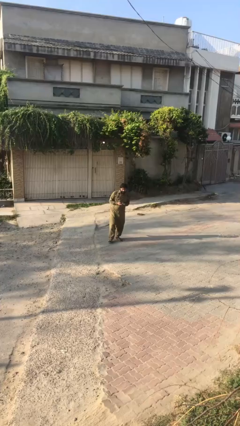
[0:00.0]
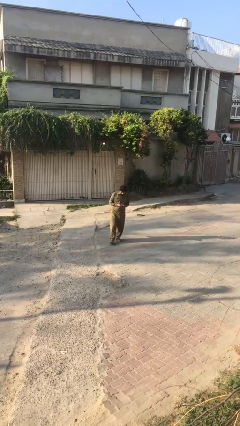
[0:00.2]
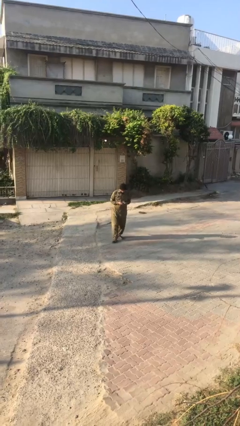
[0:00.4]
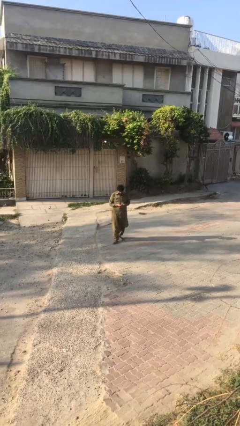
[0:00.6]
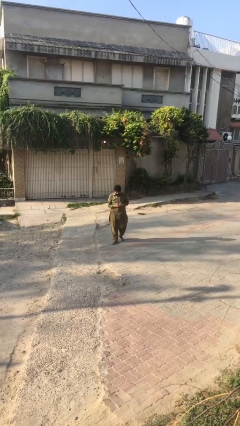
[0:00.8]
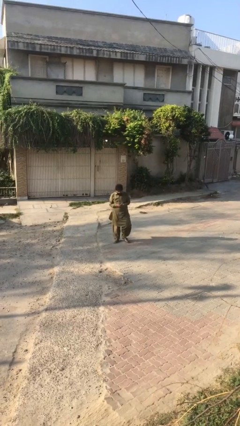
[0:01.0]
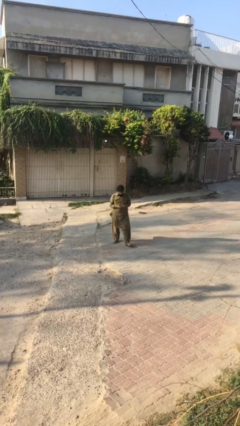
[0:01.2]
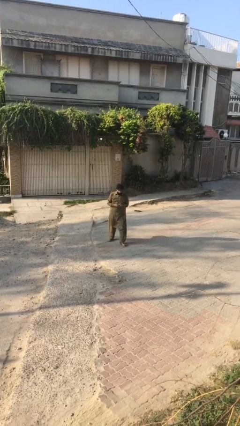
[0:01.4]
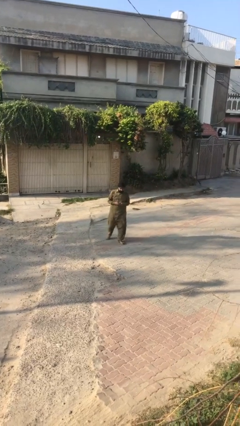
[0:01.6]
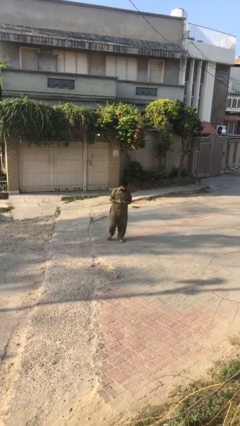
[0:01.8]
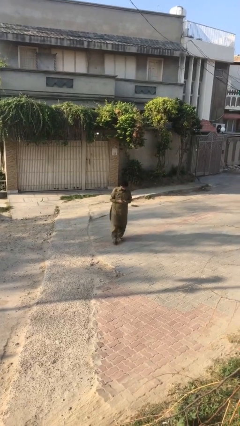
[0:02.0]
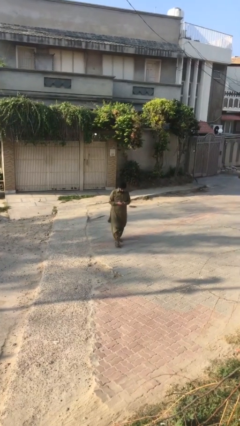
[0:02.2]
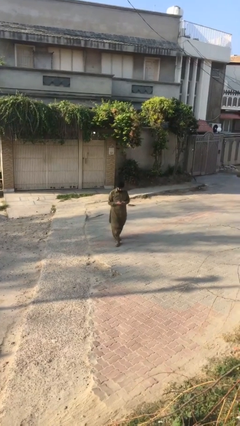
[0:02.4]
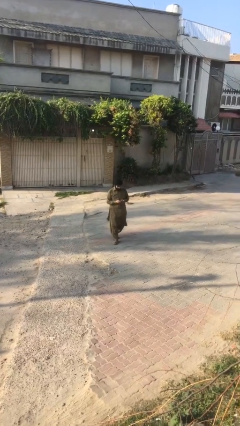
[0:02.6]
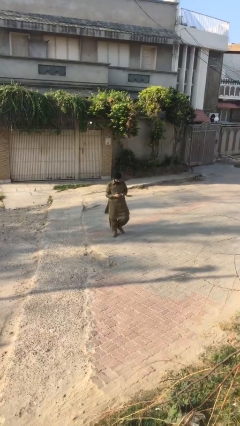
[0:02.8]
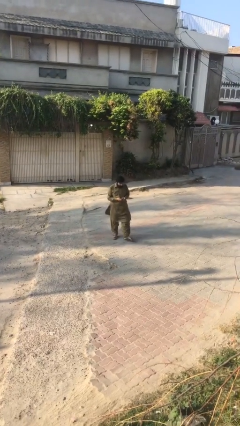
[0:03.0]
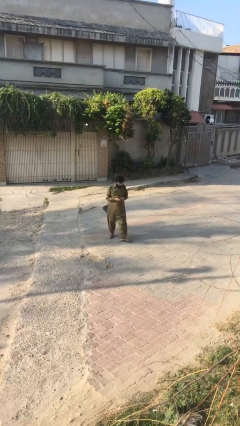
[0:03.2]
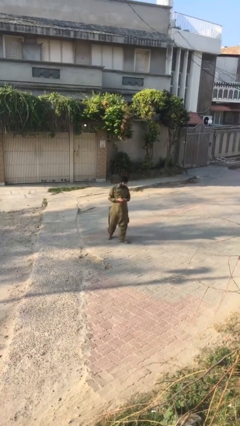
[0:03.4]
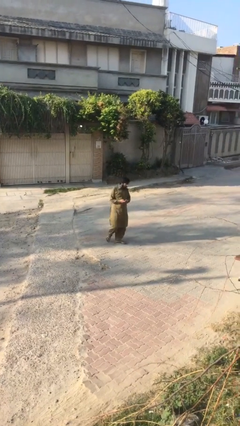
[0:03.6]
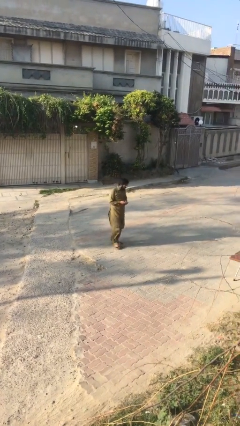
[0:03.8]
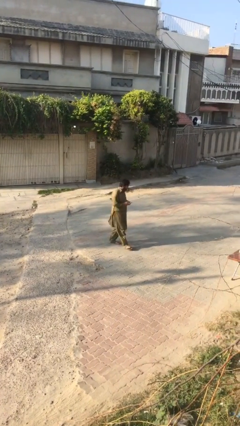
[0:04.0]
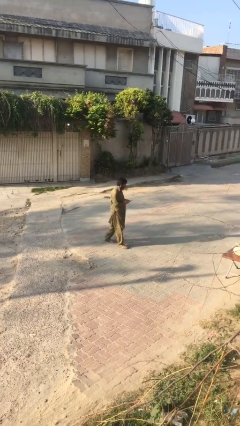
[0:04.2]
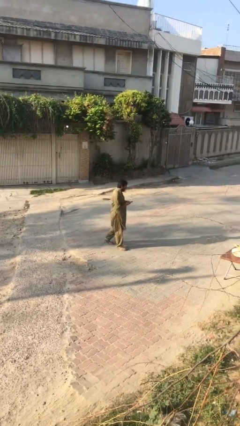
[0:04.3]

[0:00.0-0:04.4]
person texts on phone

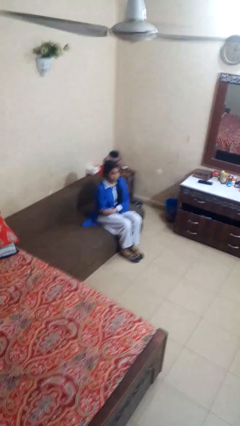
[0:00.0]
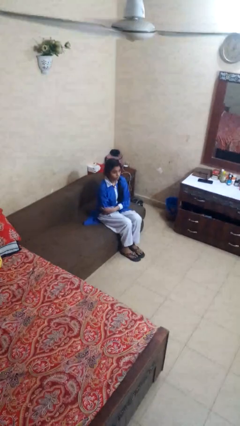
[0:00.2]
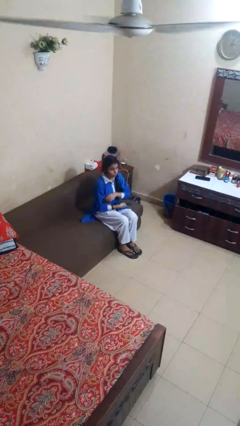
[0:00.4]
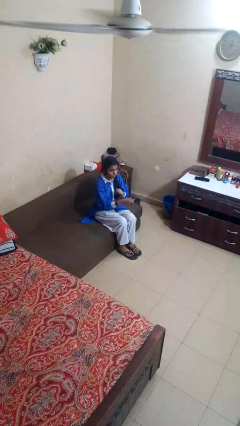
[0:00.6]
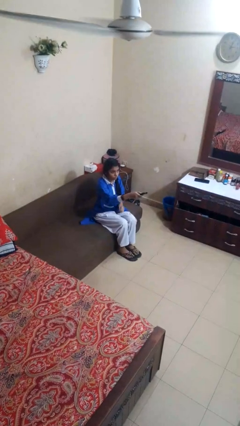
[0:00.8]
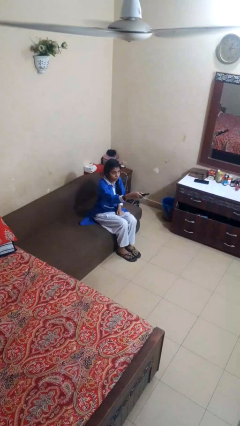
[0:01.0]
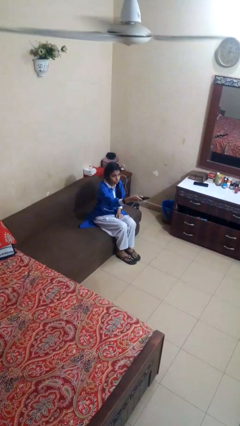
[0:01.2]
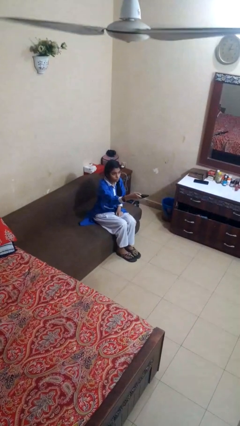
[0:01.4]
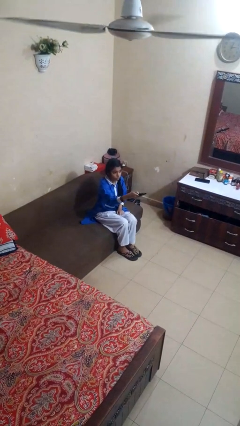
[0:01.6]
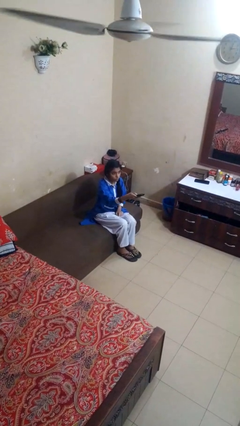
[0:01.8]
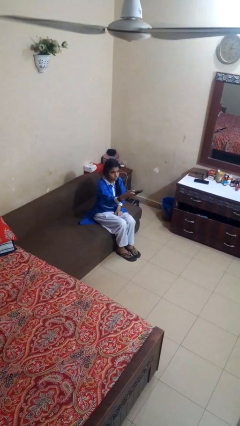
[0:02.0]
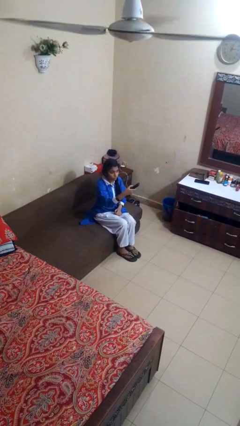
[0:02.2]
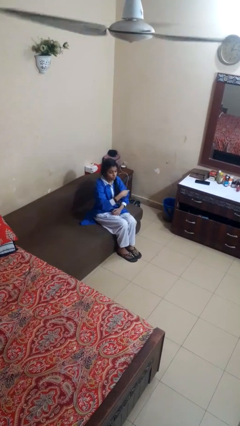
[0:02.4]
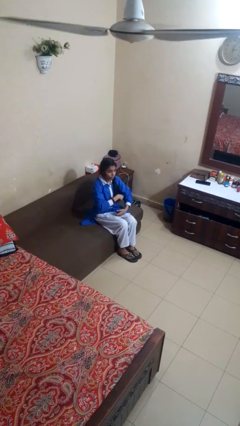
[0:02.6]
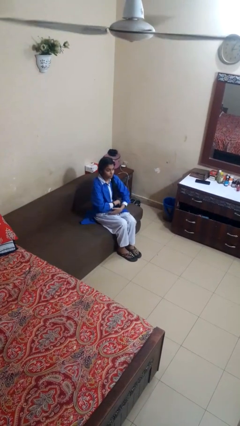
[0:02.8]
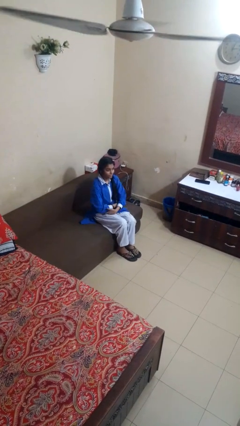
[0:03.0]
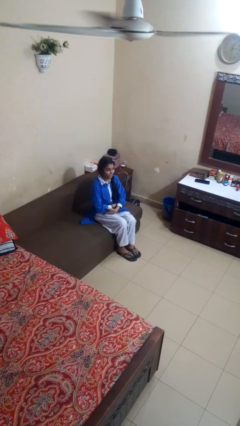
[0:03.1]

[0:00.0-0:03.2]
person uses television remote

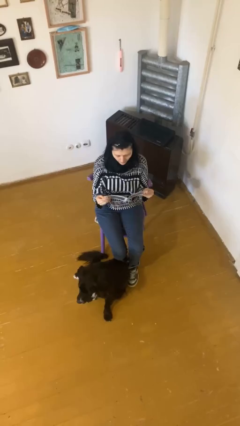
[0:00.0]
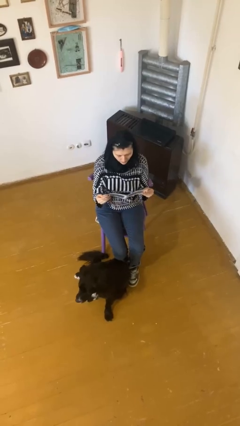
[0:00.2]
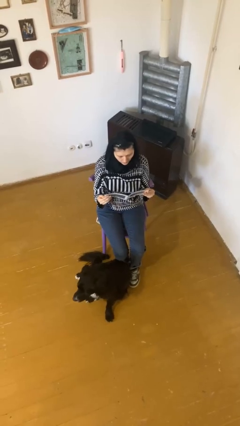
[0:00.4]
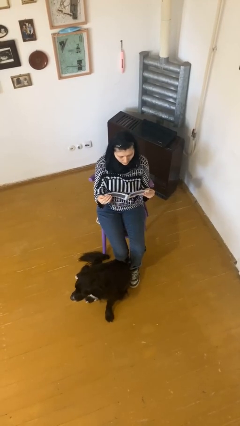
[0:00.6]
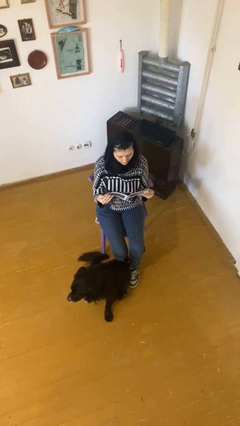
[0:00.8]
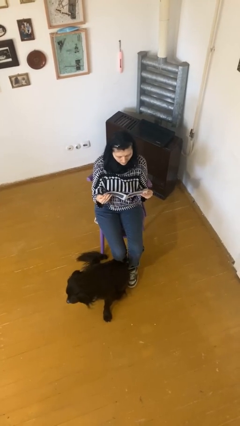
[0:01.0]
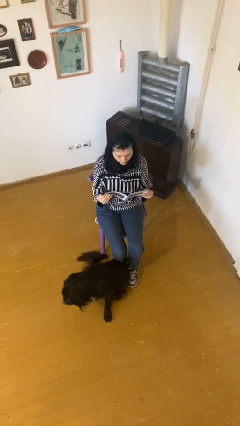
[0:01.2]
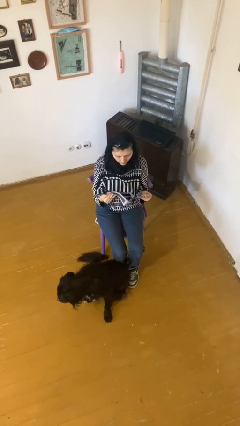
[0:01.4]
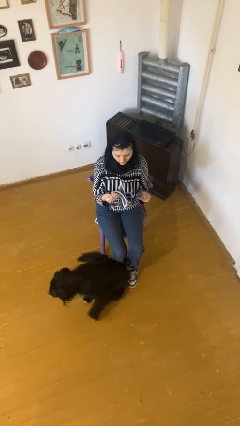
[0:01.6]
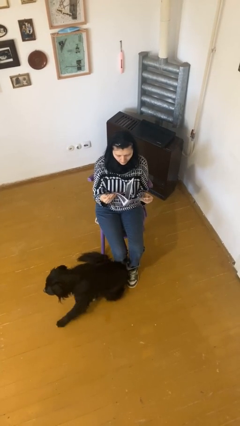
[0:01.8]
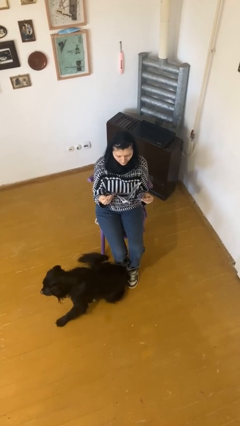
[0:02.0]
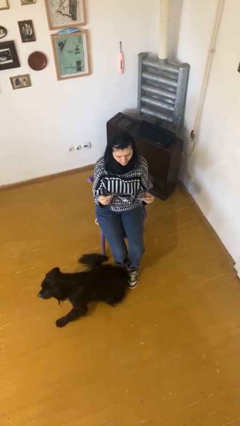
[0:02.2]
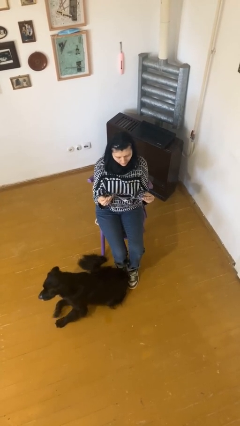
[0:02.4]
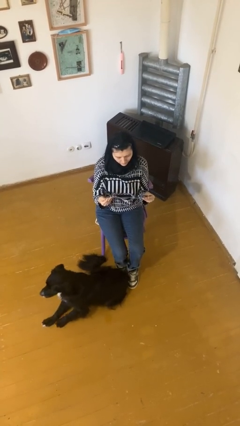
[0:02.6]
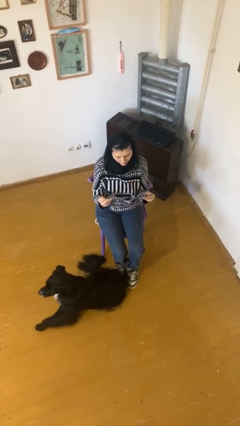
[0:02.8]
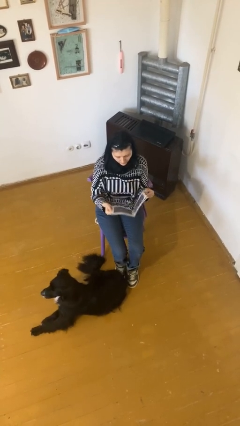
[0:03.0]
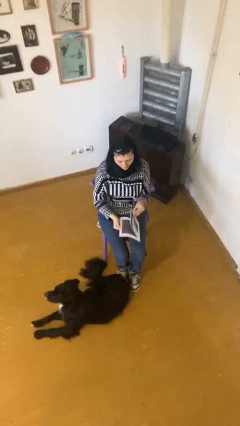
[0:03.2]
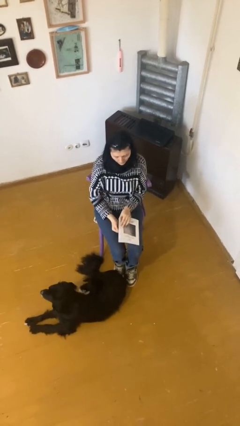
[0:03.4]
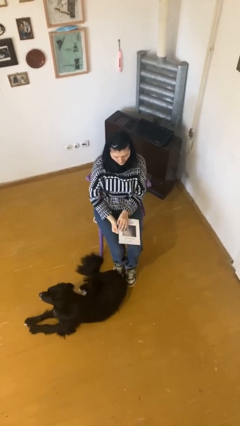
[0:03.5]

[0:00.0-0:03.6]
person reads document

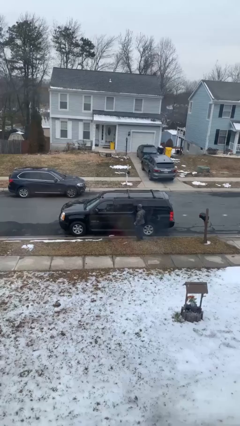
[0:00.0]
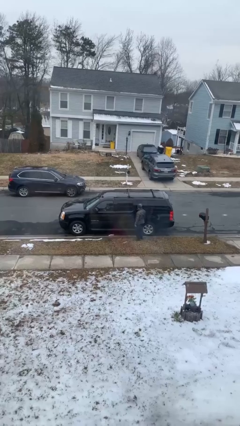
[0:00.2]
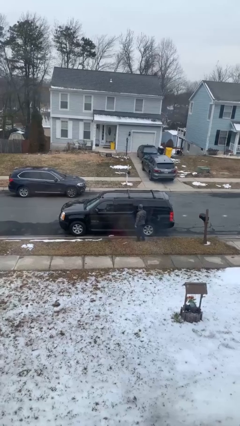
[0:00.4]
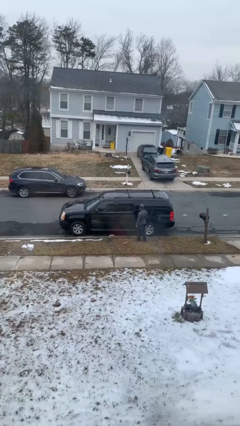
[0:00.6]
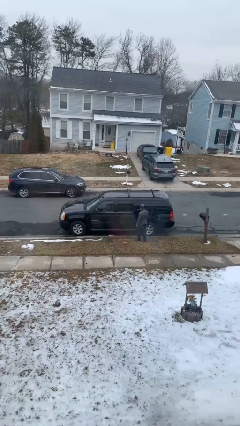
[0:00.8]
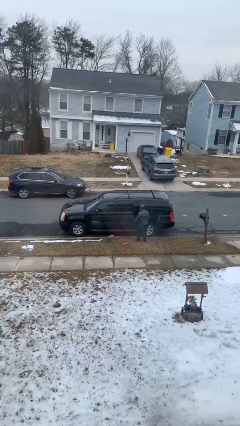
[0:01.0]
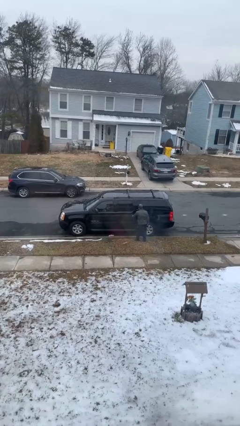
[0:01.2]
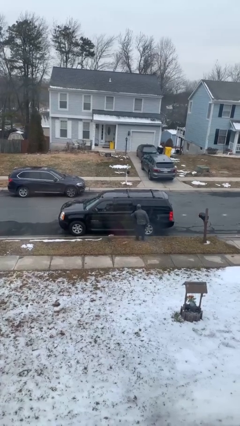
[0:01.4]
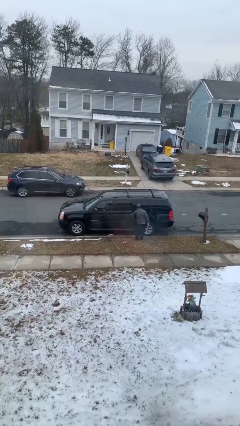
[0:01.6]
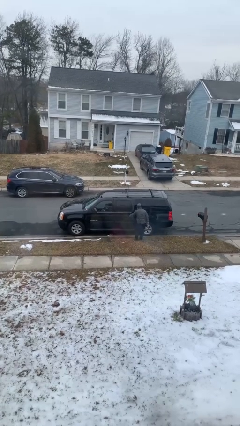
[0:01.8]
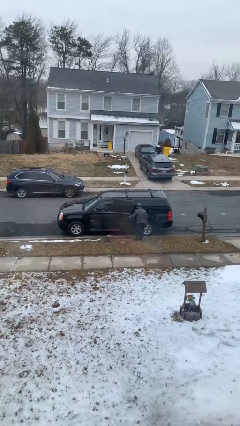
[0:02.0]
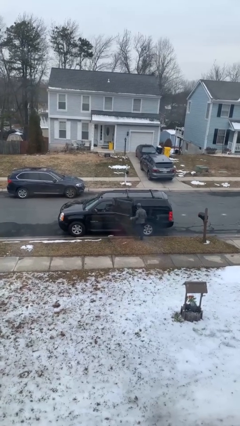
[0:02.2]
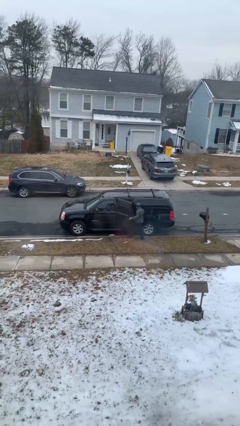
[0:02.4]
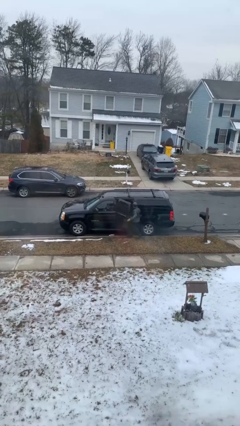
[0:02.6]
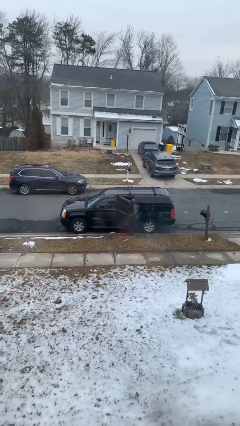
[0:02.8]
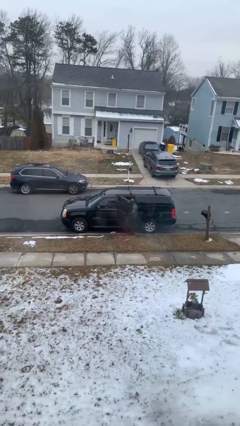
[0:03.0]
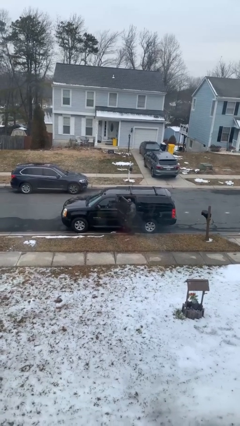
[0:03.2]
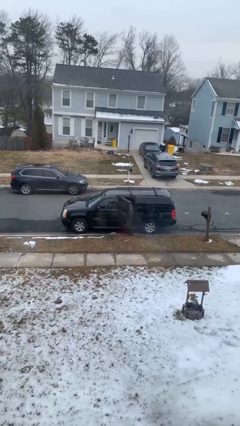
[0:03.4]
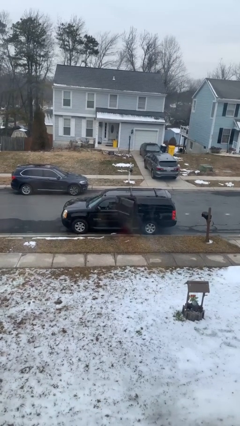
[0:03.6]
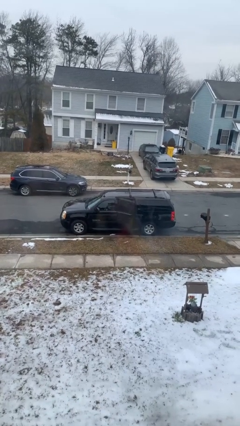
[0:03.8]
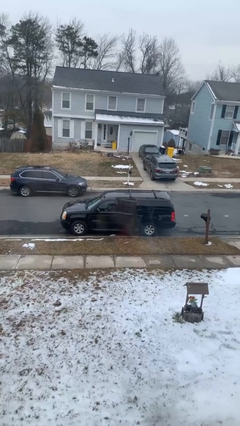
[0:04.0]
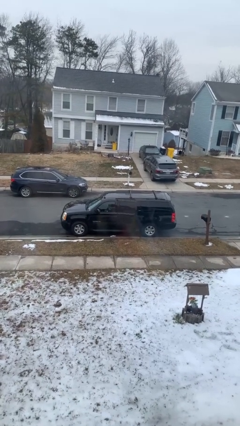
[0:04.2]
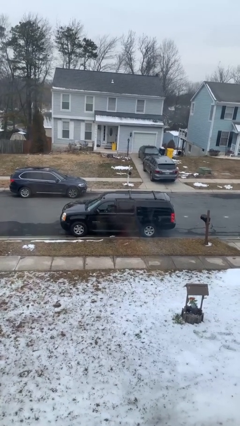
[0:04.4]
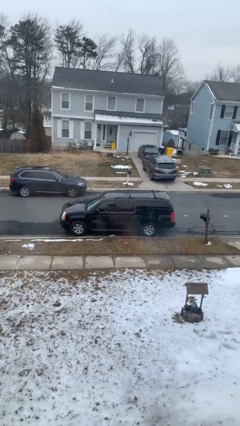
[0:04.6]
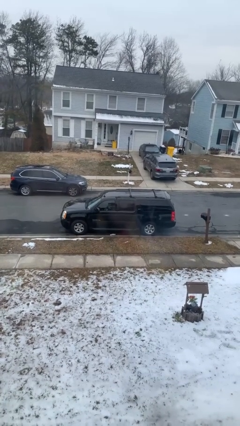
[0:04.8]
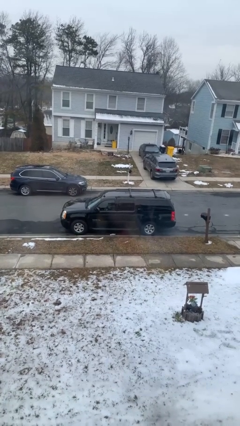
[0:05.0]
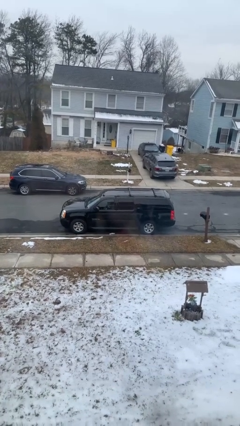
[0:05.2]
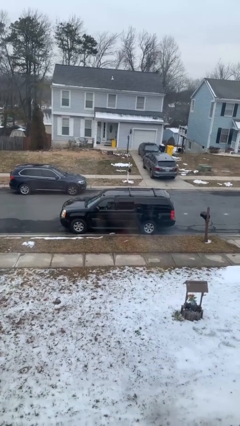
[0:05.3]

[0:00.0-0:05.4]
car picks up person

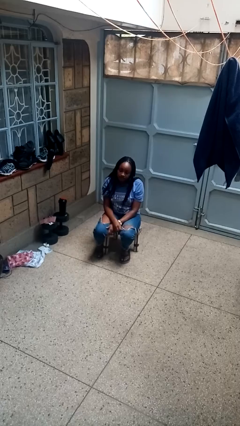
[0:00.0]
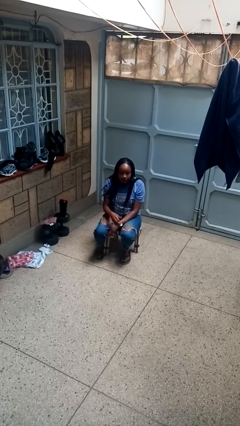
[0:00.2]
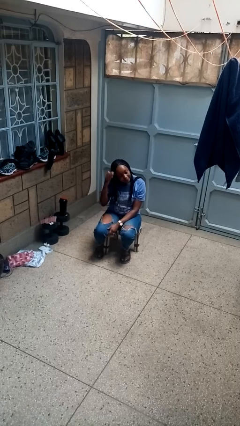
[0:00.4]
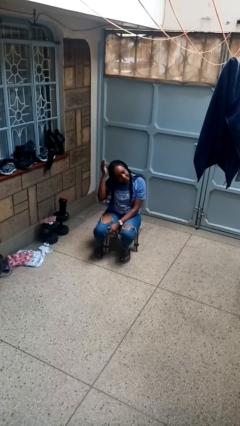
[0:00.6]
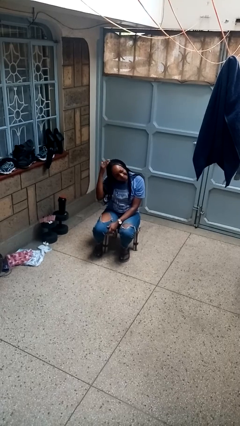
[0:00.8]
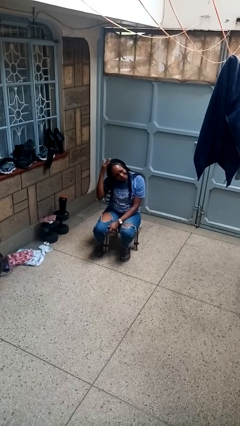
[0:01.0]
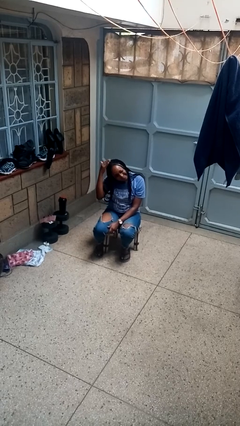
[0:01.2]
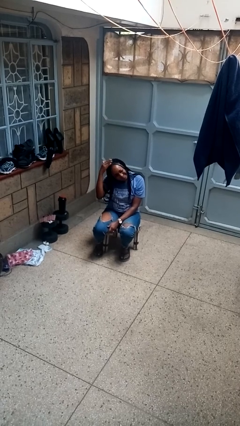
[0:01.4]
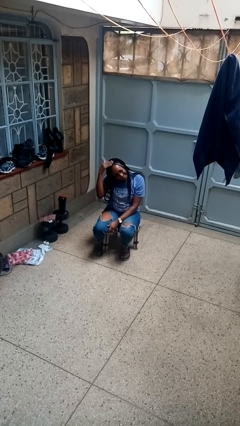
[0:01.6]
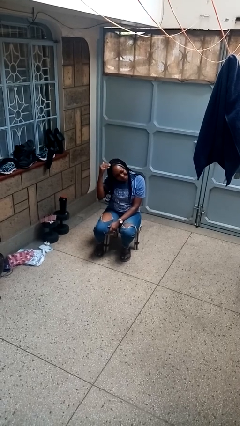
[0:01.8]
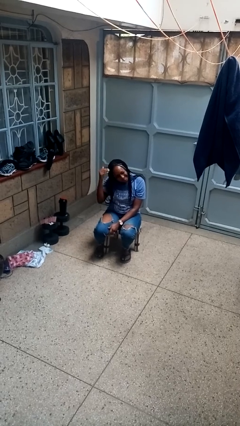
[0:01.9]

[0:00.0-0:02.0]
person pats head
